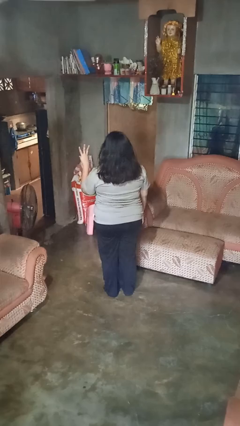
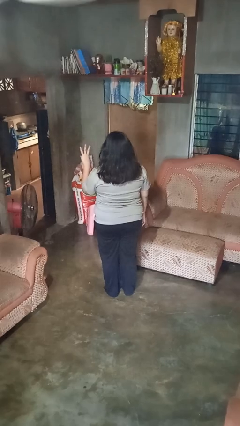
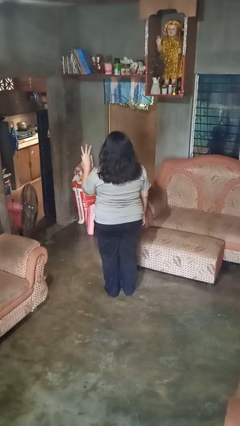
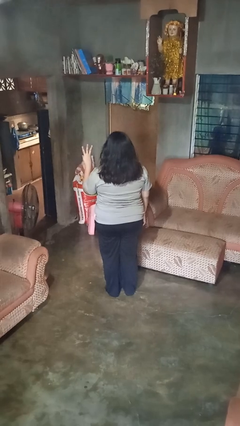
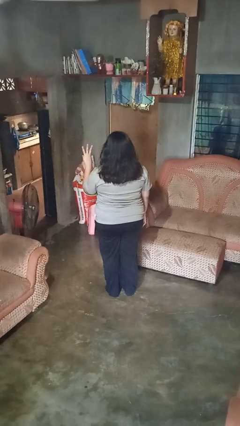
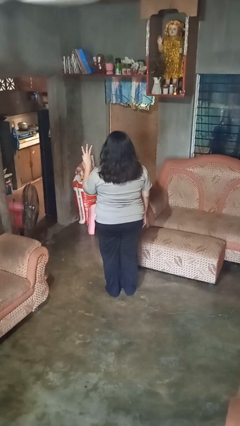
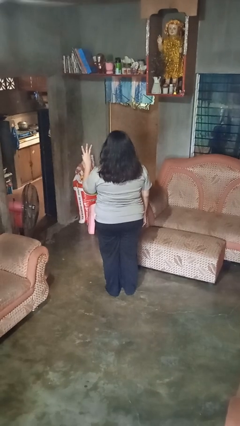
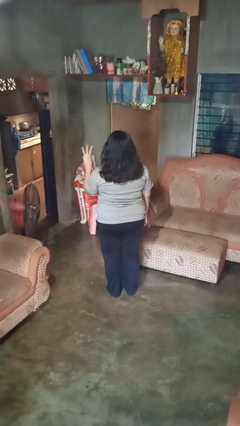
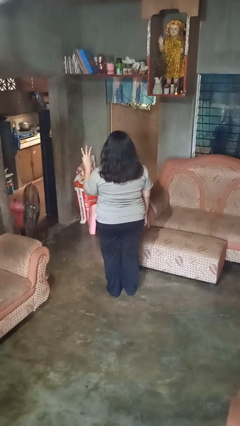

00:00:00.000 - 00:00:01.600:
person gestures number three

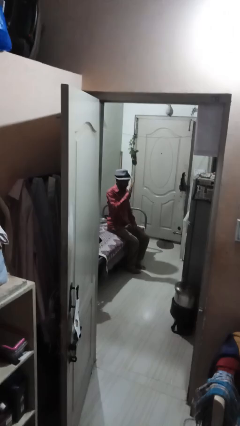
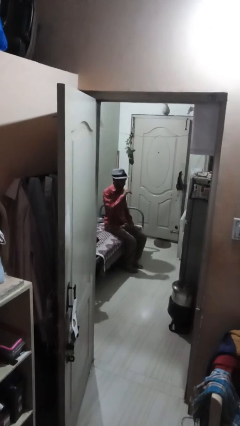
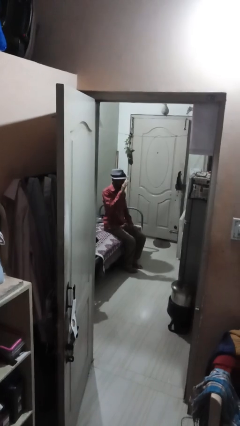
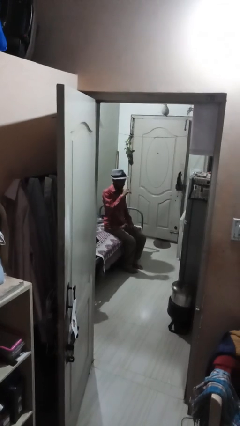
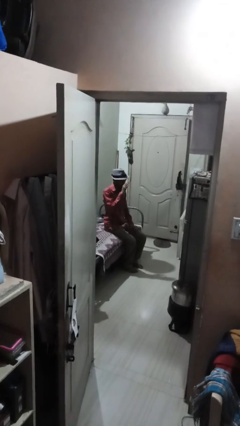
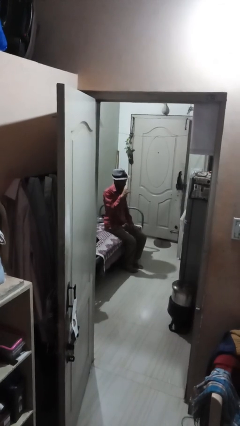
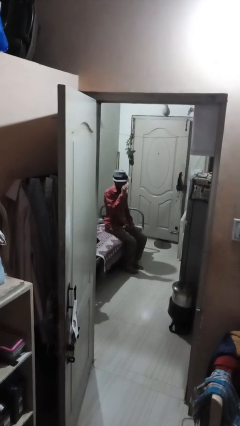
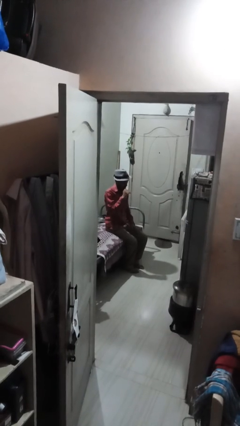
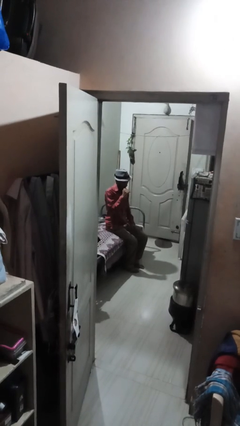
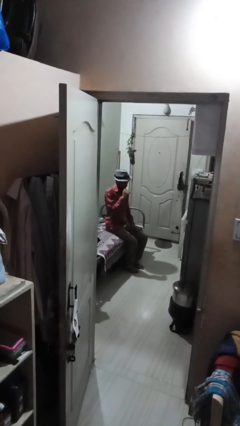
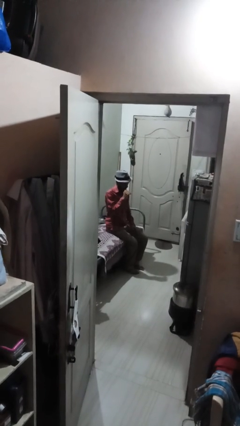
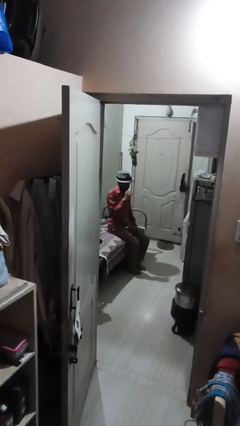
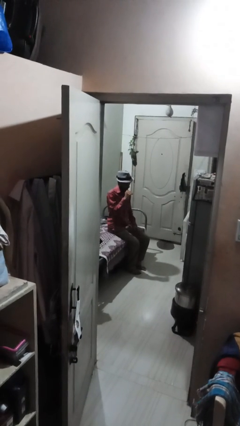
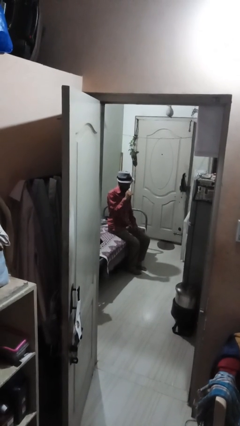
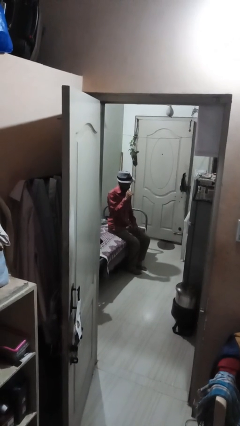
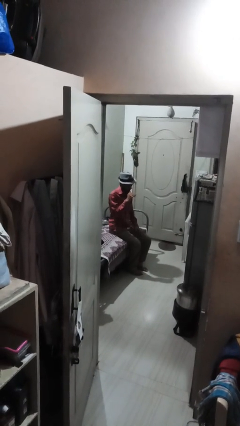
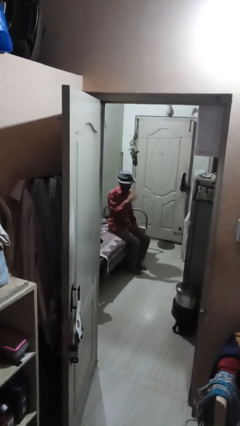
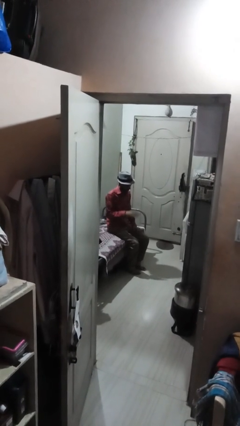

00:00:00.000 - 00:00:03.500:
person gestures come here

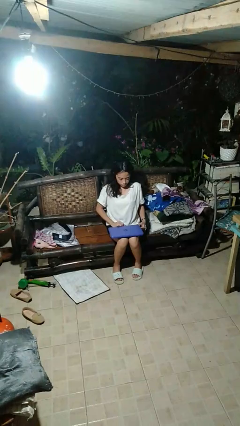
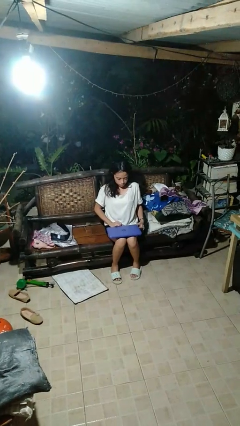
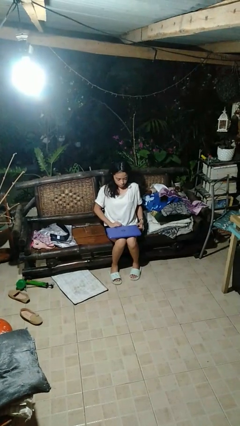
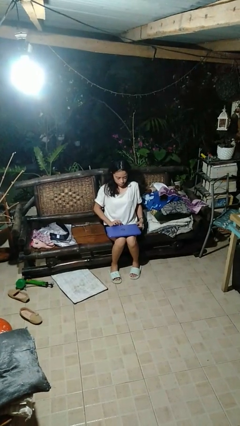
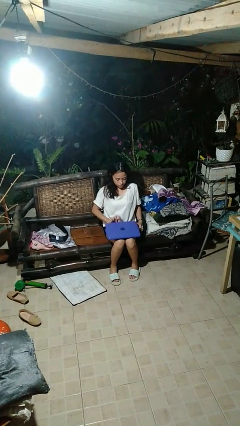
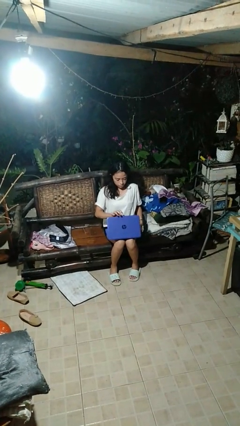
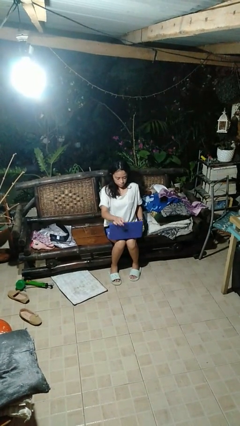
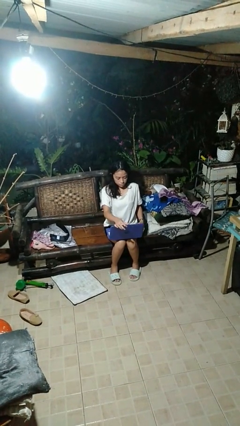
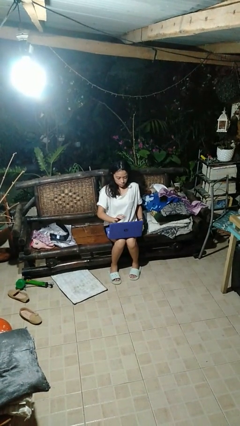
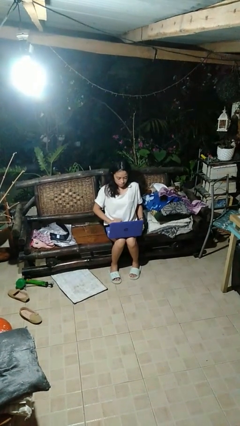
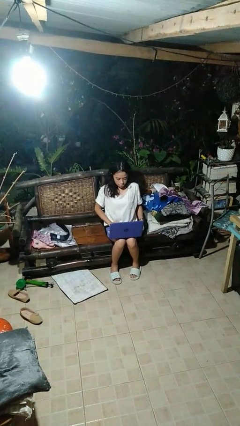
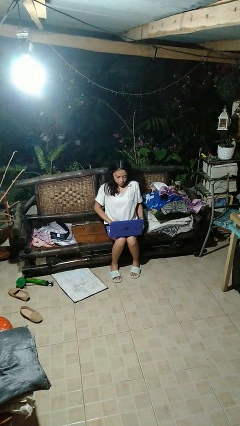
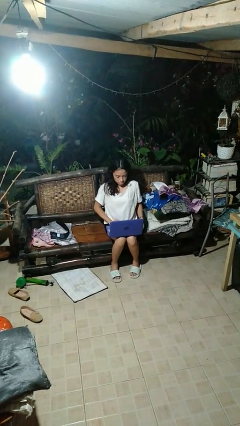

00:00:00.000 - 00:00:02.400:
person opens laptop

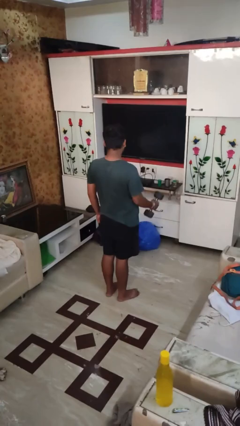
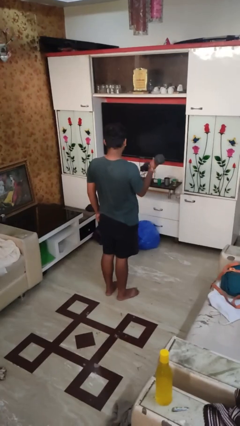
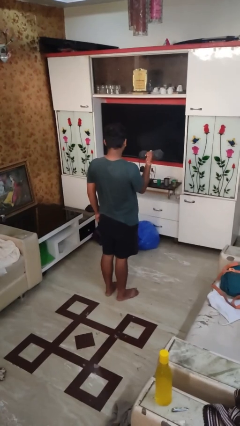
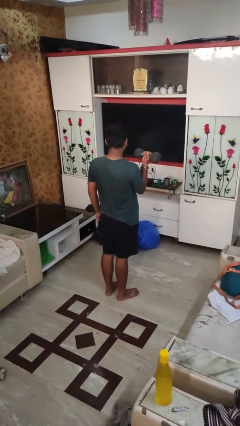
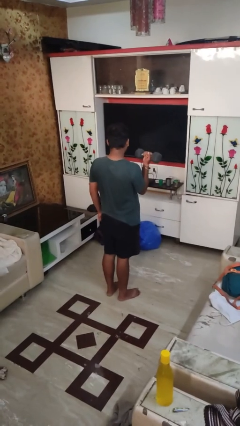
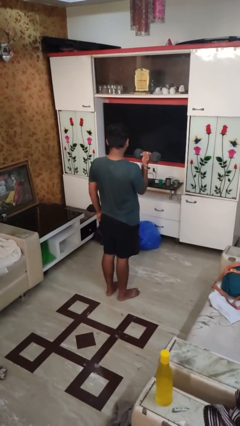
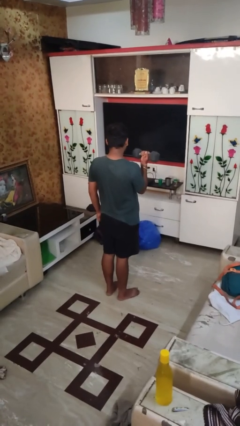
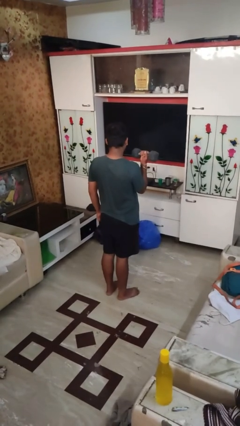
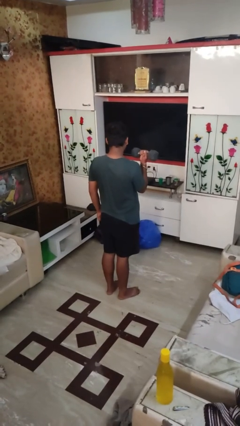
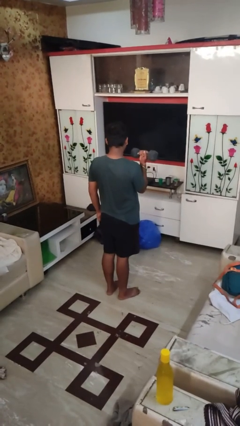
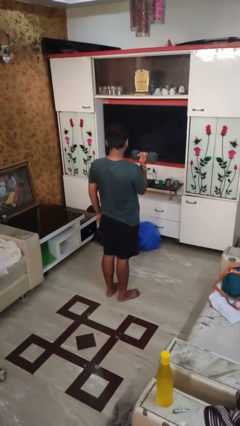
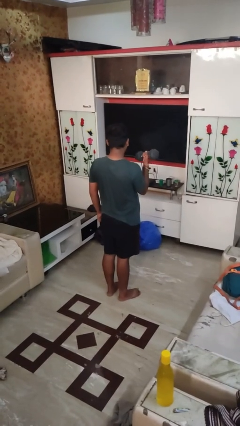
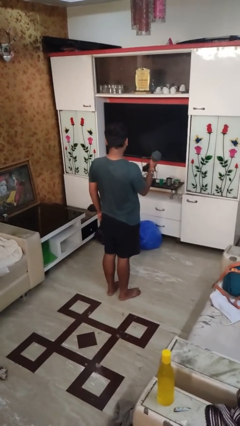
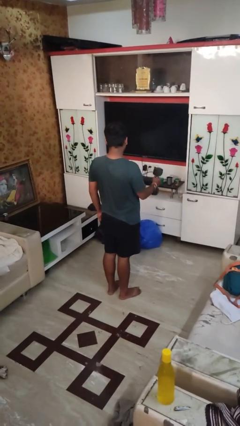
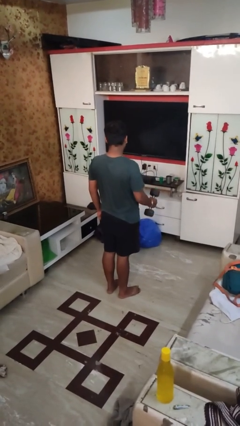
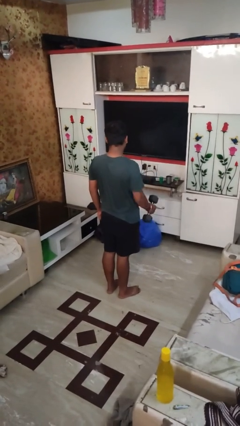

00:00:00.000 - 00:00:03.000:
person lifts dumbbells

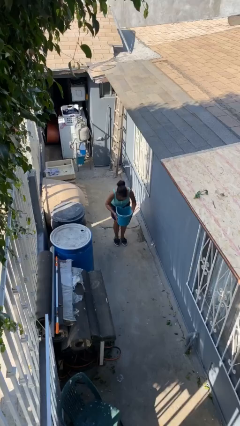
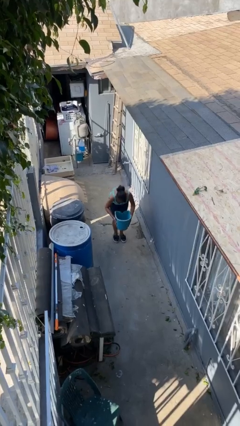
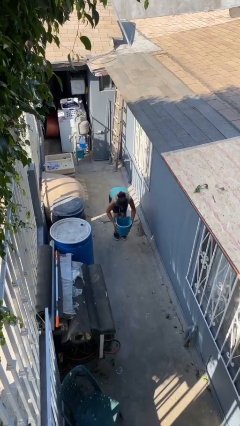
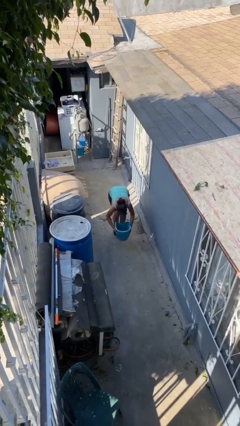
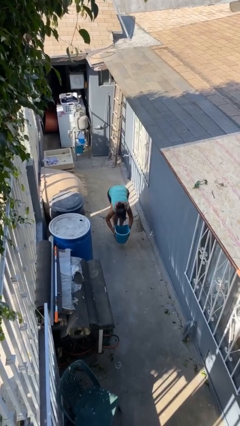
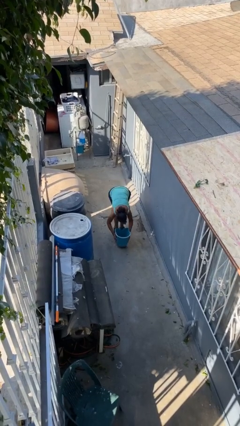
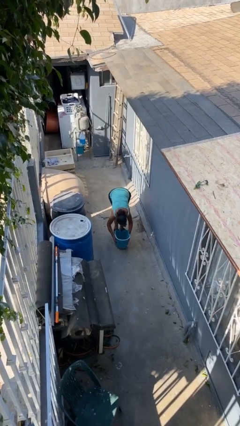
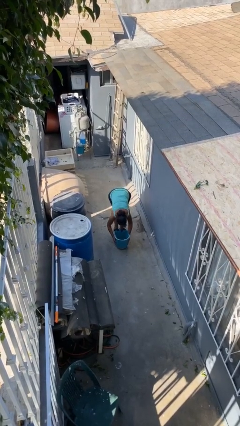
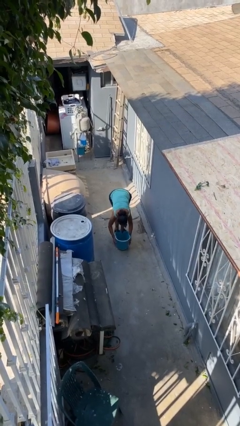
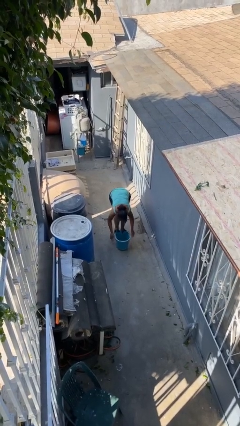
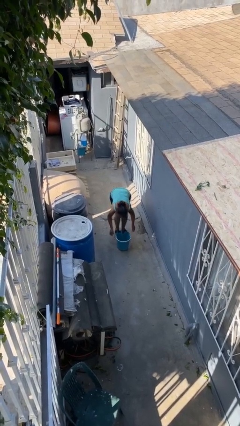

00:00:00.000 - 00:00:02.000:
person puts down object on floor

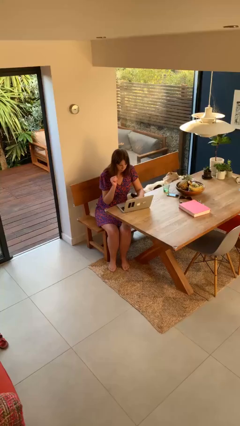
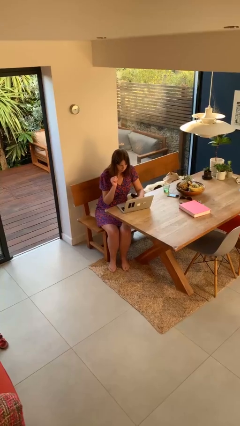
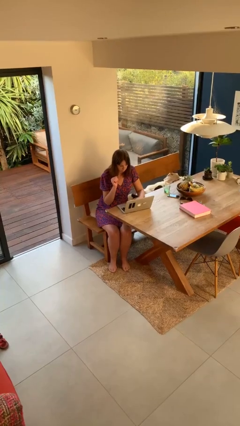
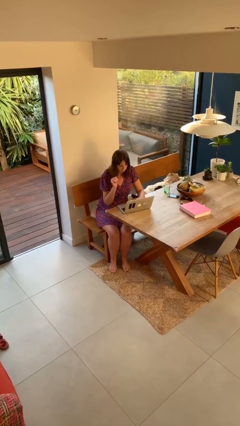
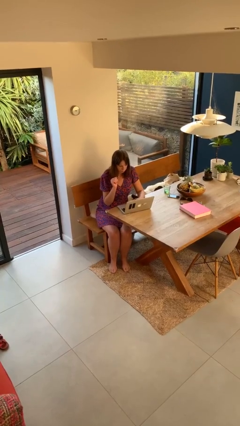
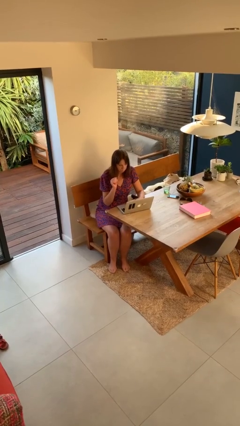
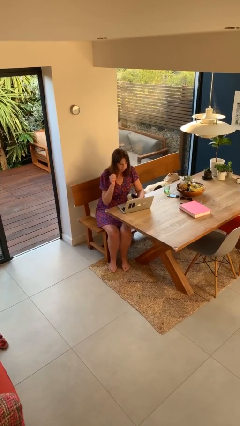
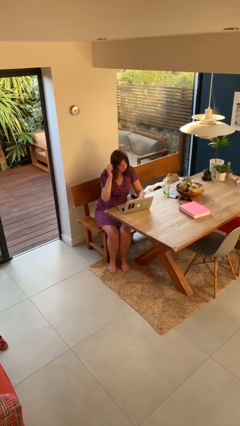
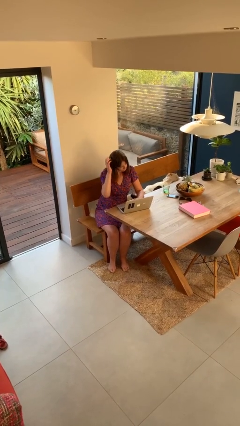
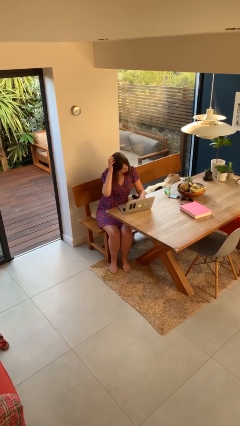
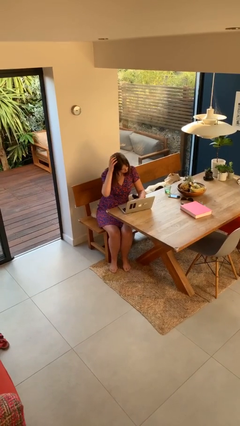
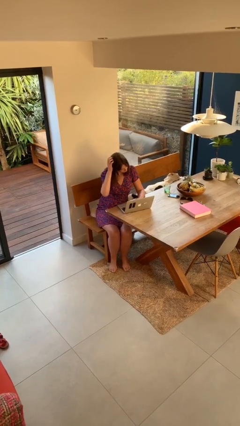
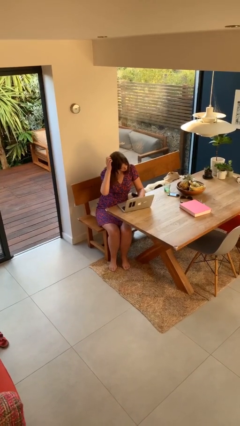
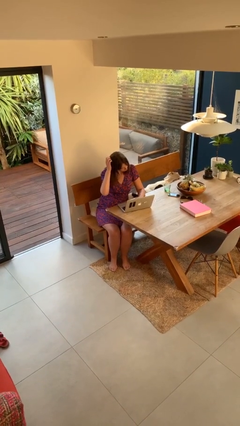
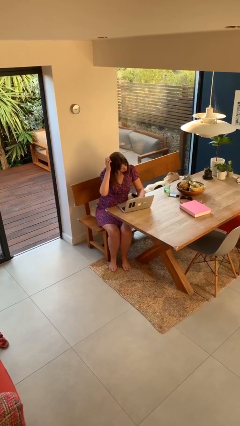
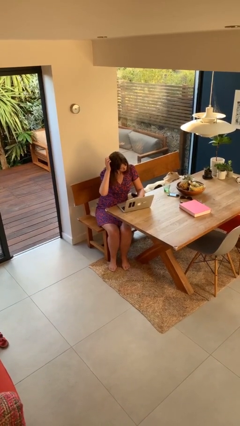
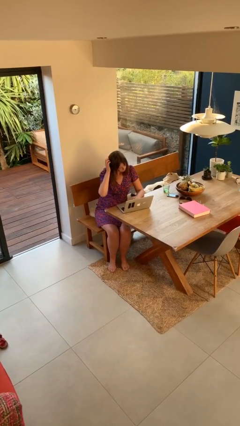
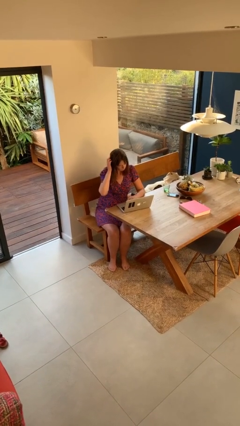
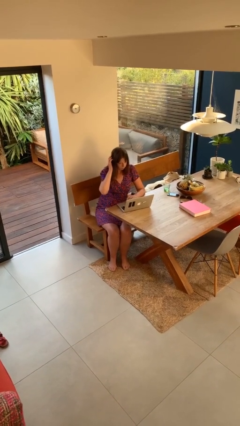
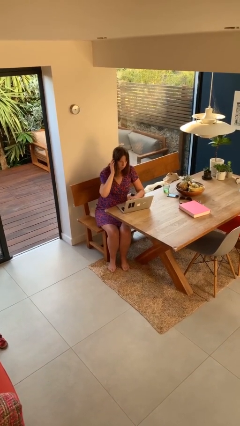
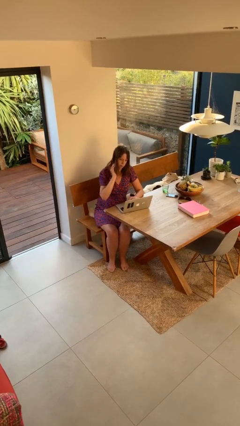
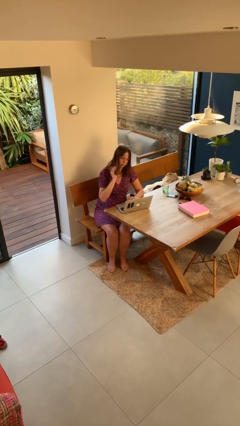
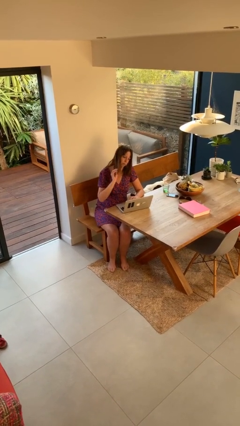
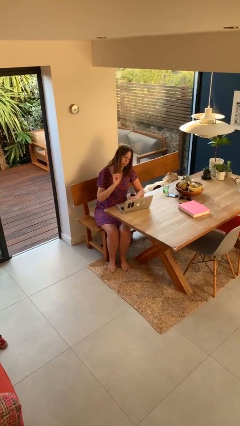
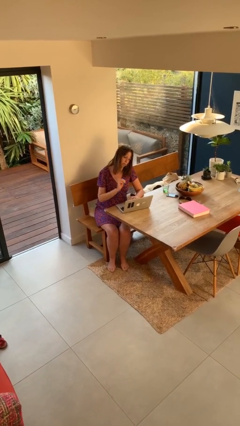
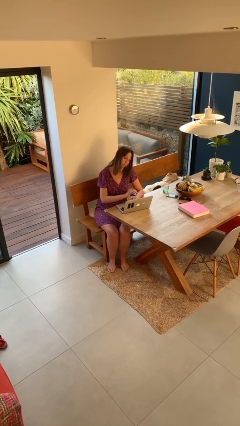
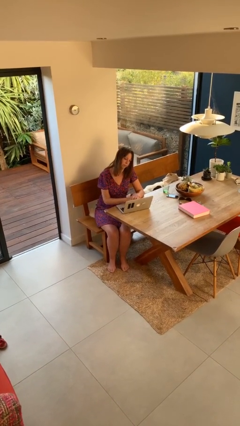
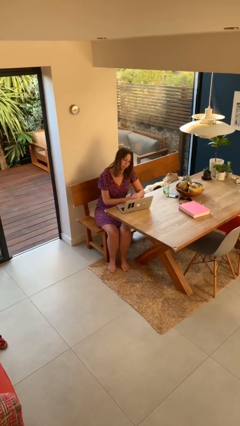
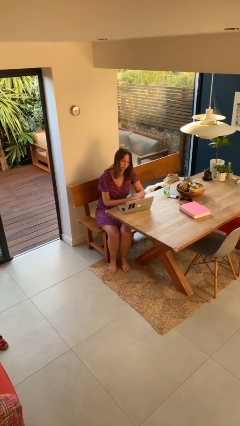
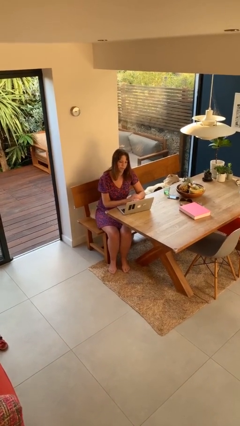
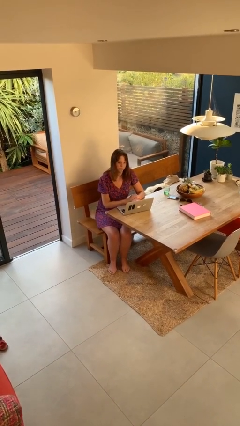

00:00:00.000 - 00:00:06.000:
person interacts with laptop
